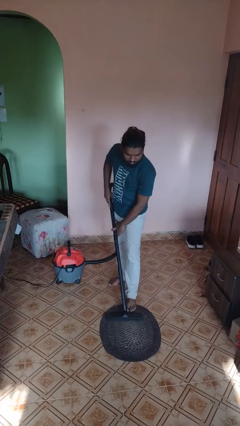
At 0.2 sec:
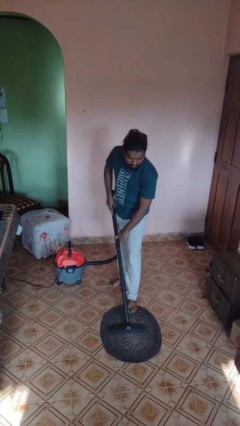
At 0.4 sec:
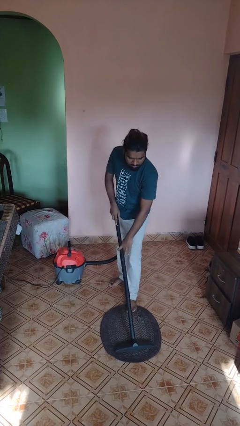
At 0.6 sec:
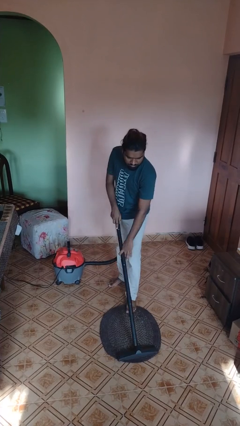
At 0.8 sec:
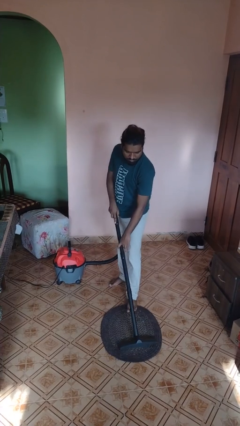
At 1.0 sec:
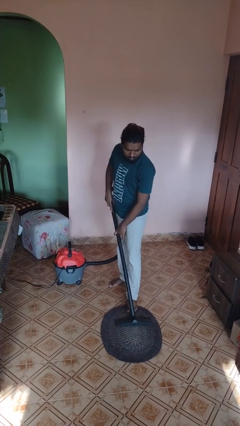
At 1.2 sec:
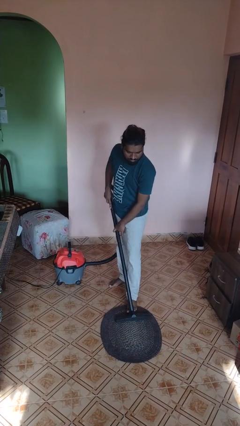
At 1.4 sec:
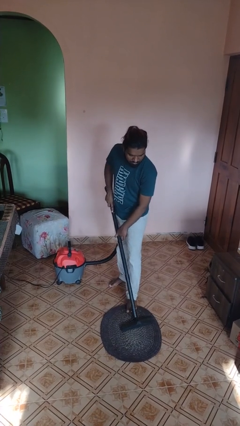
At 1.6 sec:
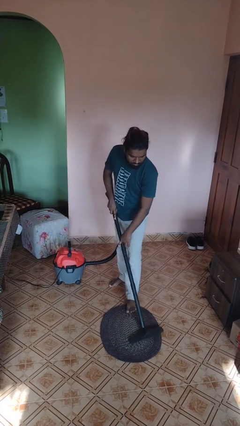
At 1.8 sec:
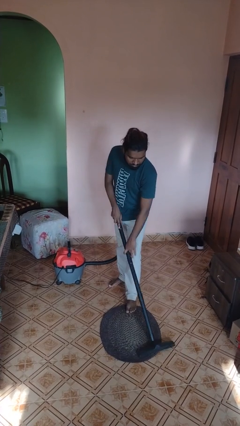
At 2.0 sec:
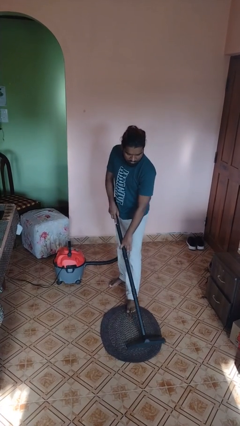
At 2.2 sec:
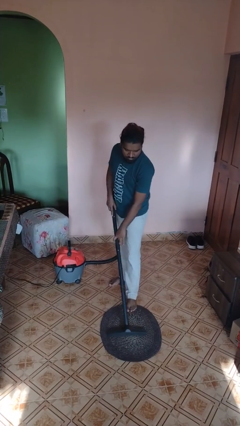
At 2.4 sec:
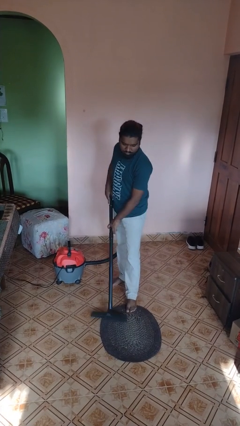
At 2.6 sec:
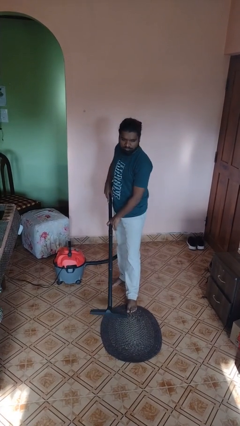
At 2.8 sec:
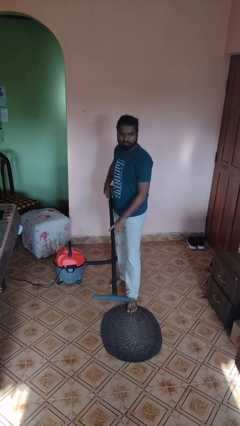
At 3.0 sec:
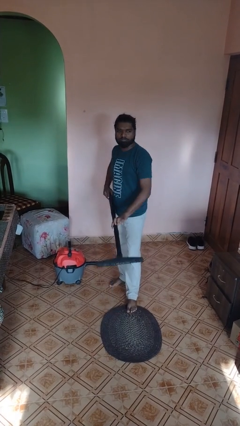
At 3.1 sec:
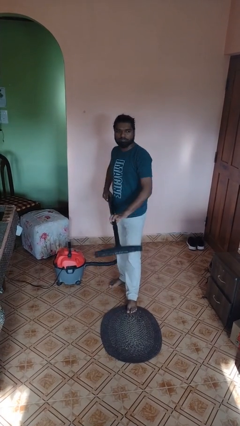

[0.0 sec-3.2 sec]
person vacuums carpet

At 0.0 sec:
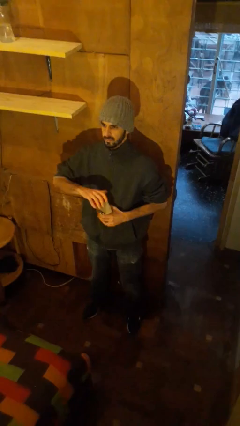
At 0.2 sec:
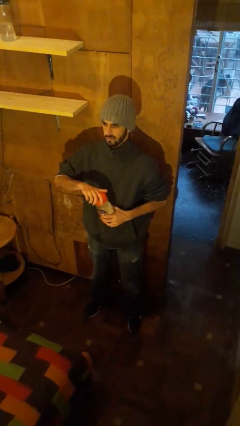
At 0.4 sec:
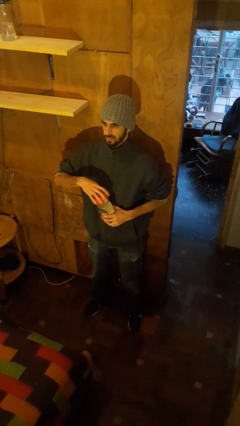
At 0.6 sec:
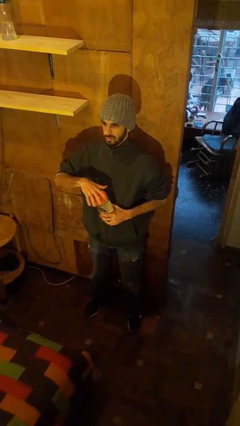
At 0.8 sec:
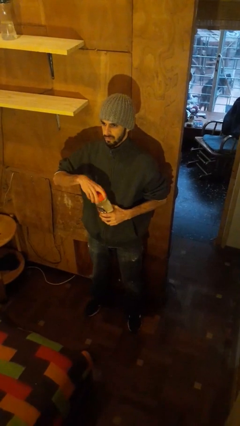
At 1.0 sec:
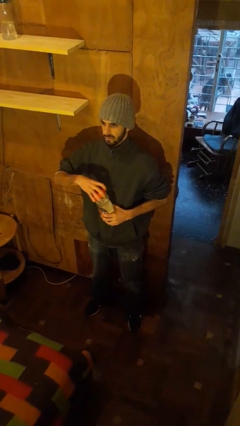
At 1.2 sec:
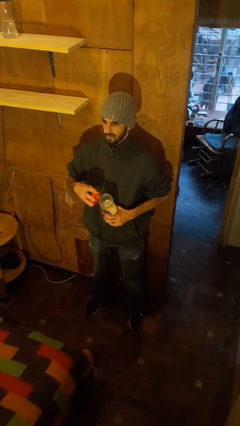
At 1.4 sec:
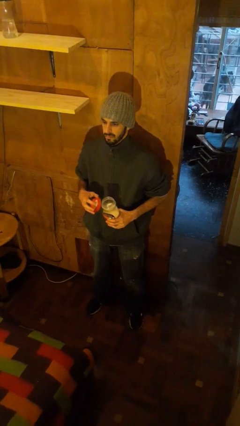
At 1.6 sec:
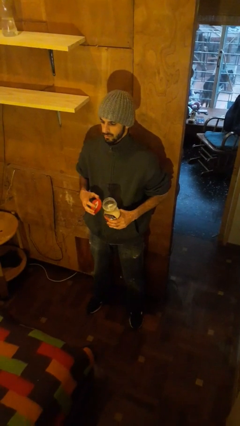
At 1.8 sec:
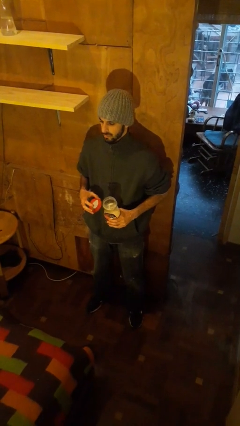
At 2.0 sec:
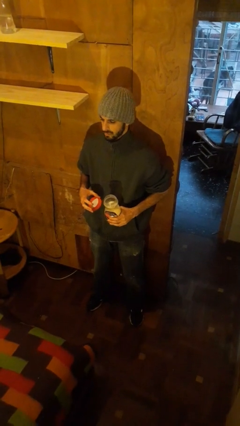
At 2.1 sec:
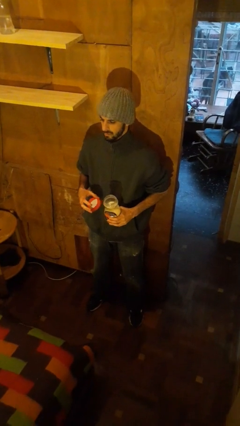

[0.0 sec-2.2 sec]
person opens jar

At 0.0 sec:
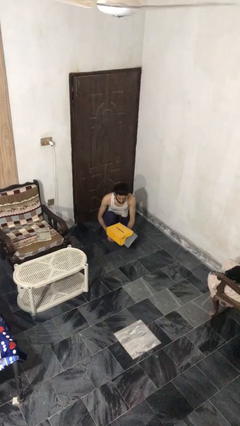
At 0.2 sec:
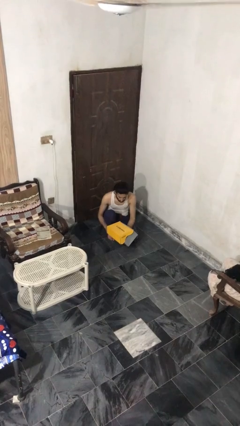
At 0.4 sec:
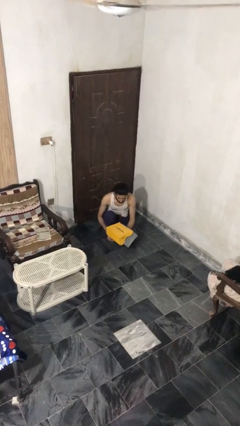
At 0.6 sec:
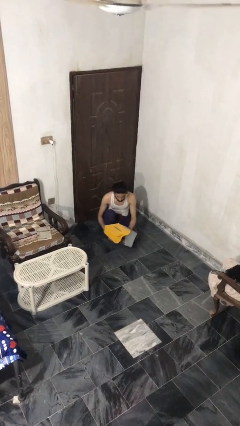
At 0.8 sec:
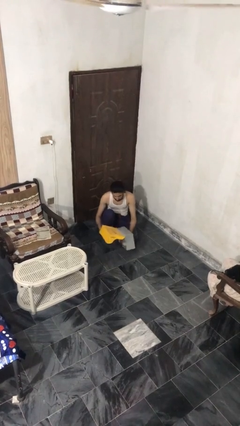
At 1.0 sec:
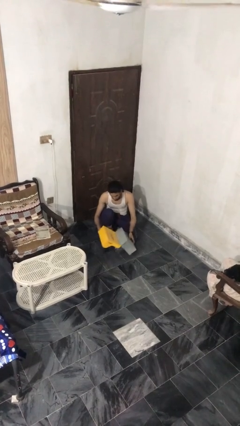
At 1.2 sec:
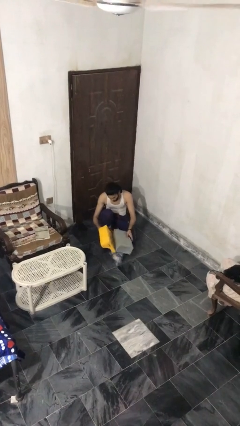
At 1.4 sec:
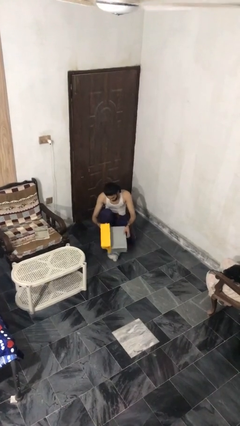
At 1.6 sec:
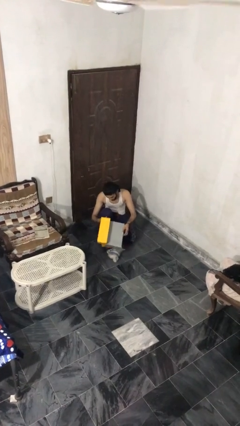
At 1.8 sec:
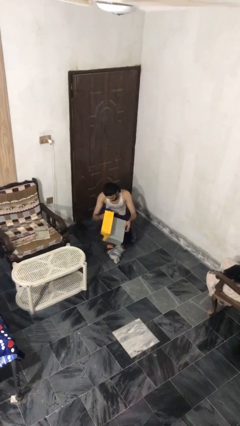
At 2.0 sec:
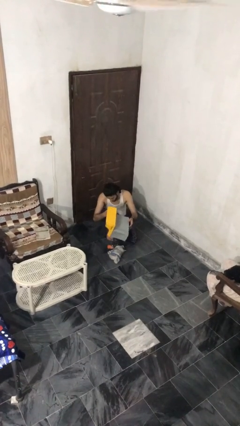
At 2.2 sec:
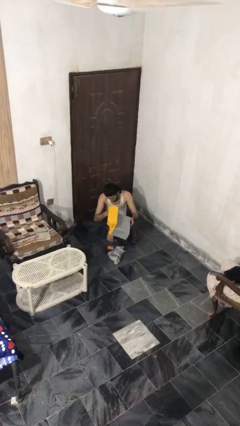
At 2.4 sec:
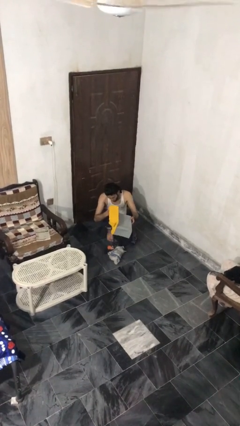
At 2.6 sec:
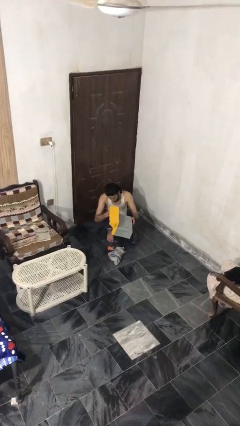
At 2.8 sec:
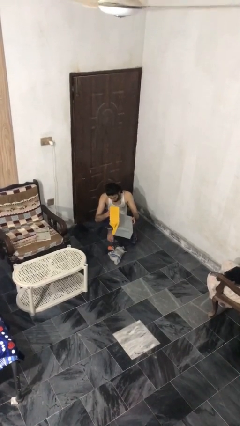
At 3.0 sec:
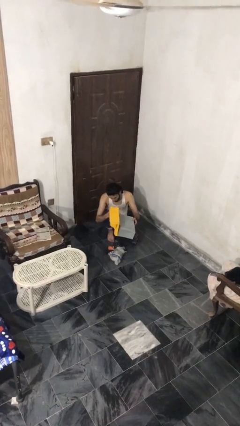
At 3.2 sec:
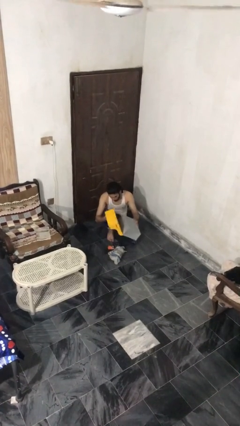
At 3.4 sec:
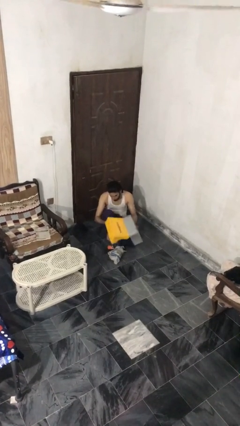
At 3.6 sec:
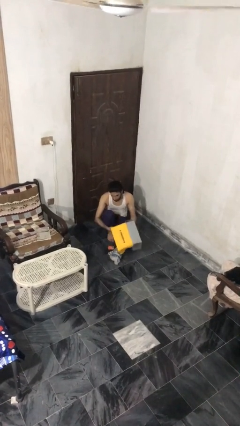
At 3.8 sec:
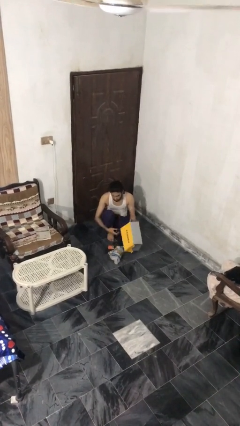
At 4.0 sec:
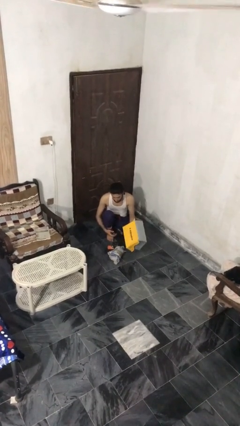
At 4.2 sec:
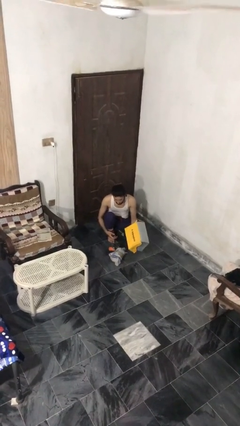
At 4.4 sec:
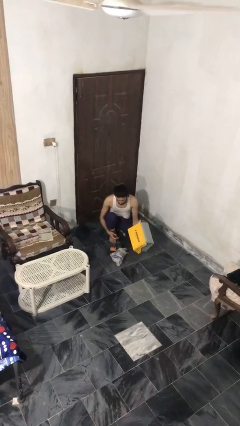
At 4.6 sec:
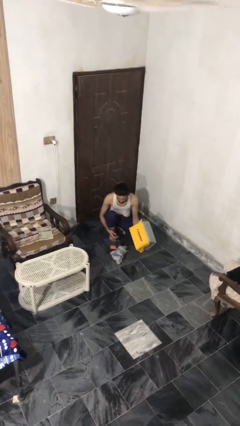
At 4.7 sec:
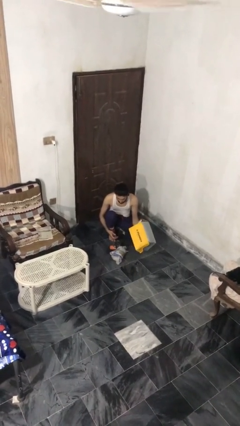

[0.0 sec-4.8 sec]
person unloads box onto floor

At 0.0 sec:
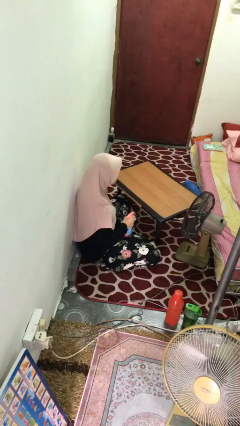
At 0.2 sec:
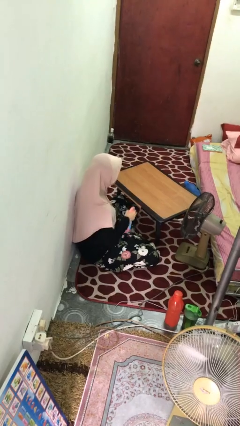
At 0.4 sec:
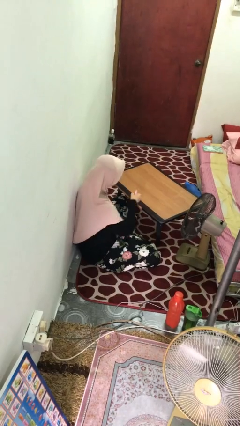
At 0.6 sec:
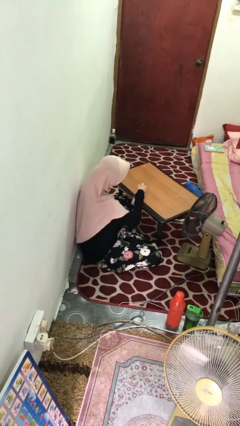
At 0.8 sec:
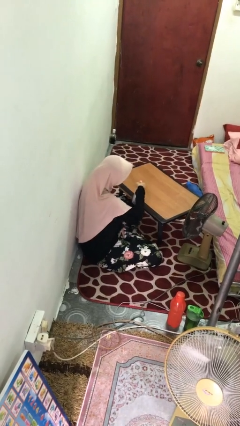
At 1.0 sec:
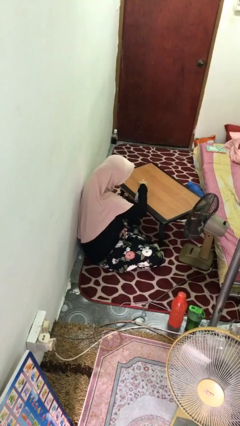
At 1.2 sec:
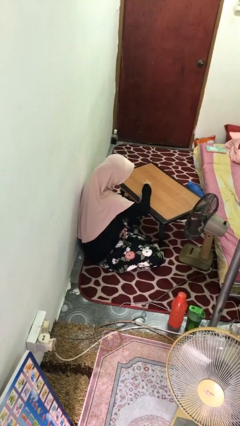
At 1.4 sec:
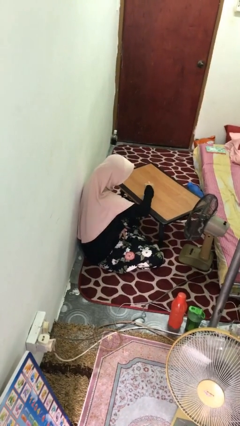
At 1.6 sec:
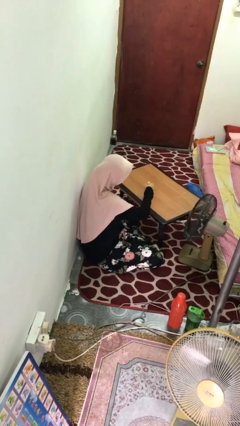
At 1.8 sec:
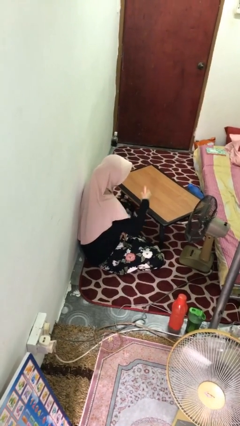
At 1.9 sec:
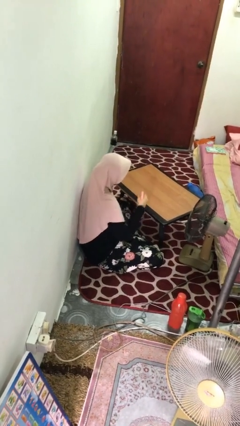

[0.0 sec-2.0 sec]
person sprays from bottle

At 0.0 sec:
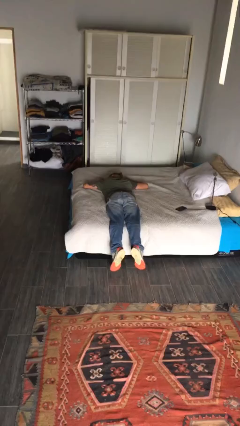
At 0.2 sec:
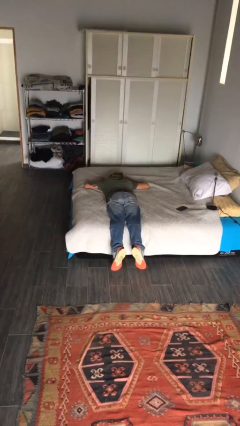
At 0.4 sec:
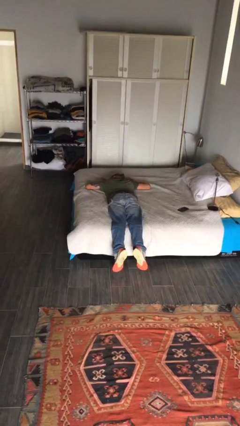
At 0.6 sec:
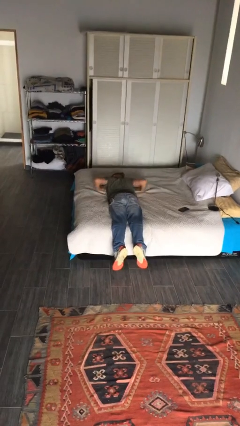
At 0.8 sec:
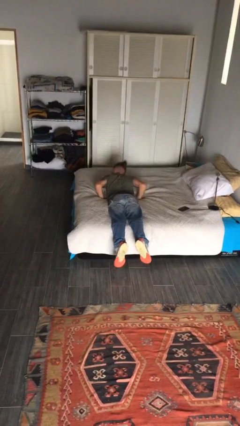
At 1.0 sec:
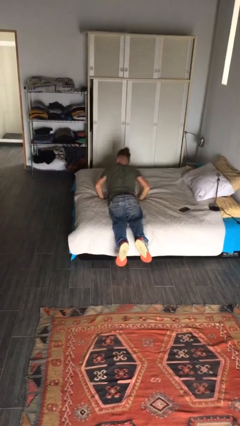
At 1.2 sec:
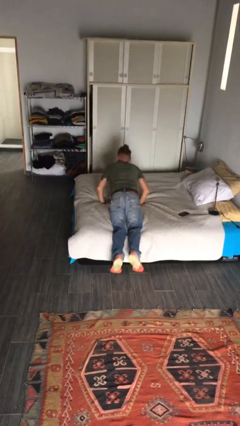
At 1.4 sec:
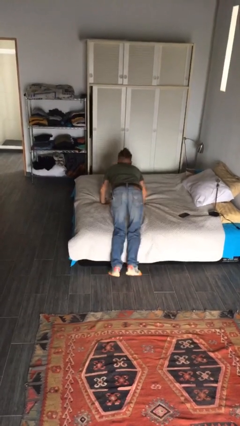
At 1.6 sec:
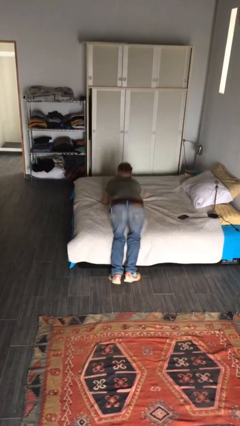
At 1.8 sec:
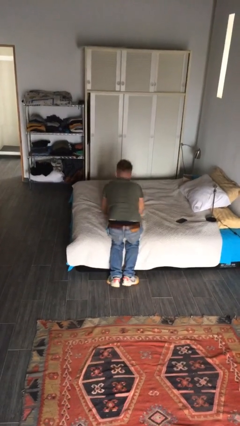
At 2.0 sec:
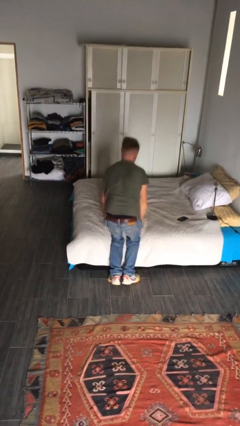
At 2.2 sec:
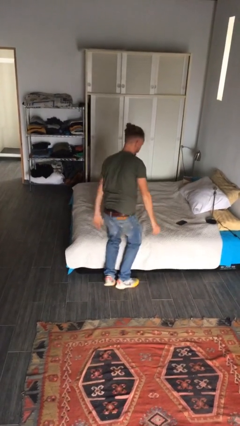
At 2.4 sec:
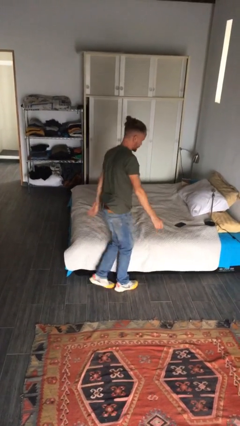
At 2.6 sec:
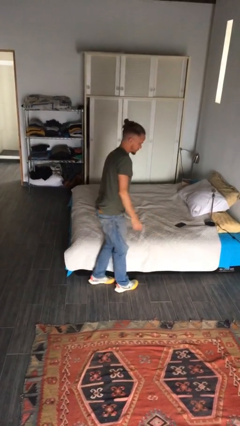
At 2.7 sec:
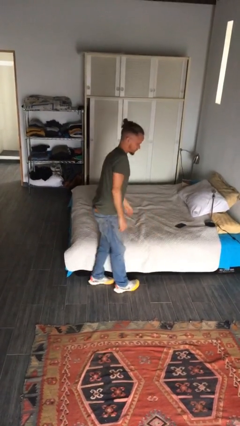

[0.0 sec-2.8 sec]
person stands up

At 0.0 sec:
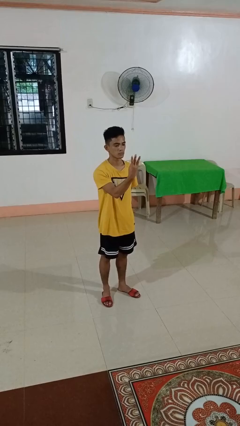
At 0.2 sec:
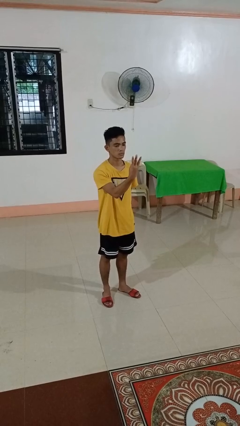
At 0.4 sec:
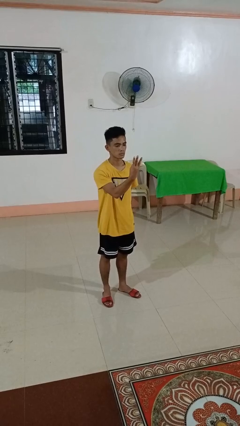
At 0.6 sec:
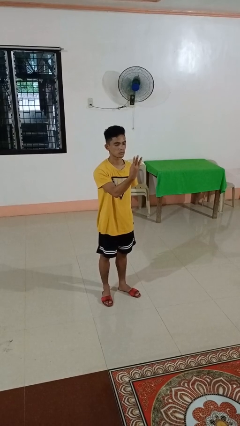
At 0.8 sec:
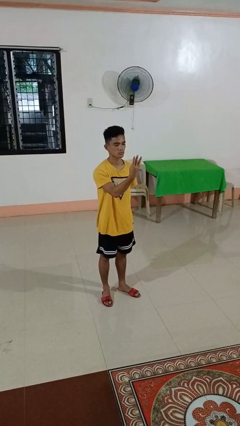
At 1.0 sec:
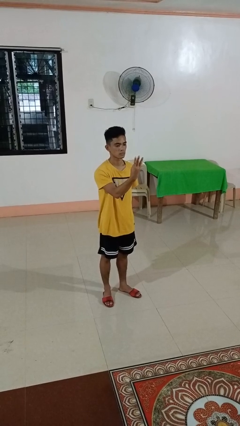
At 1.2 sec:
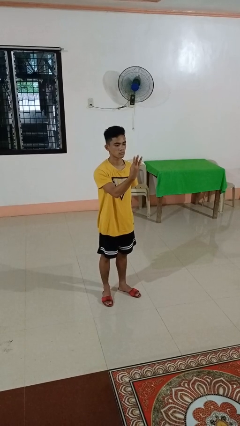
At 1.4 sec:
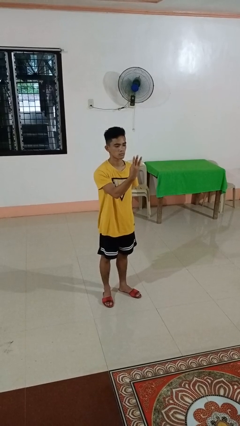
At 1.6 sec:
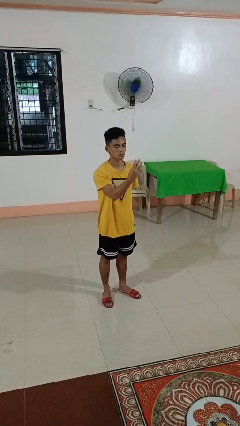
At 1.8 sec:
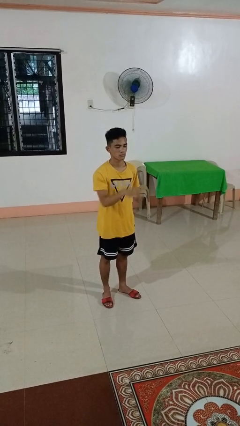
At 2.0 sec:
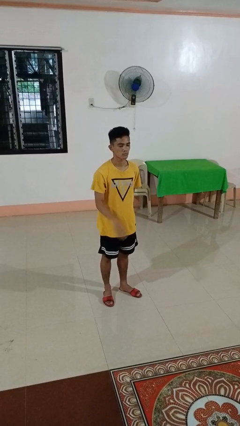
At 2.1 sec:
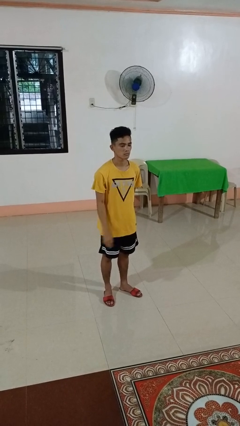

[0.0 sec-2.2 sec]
person gestures number three
